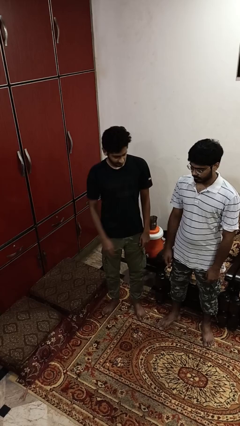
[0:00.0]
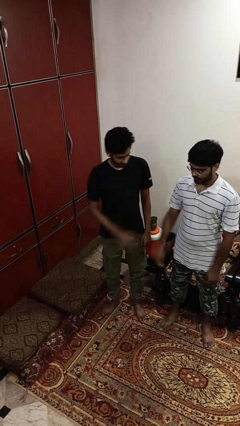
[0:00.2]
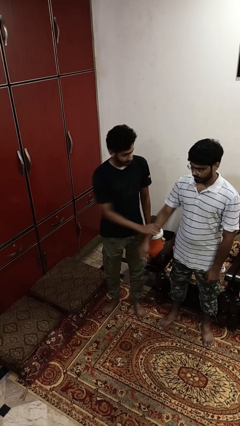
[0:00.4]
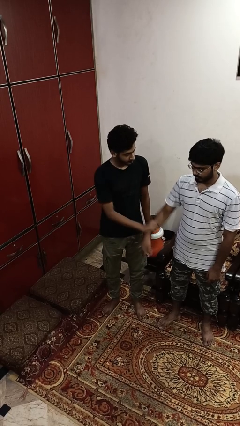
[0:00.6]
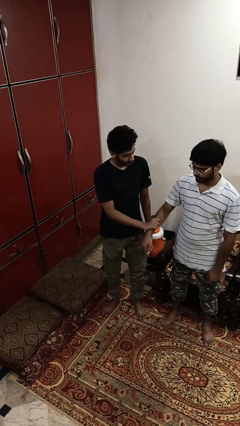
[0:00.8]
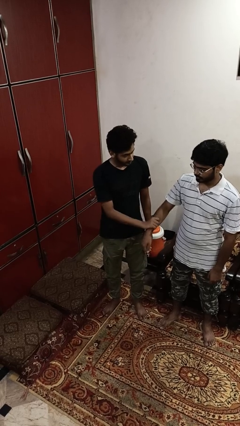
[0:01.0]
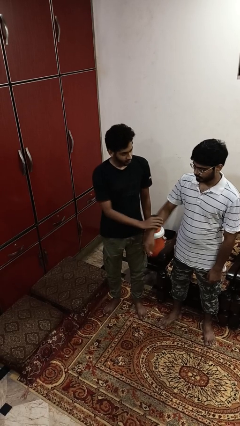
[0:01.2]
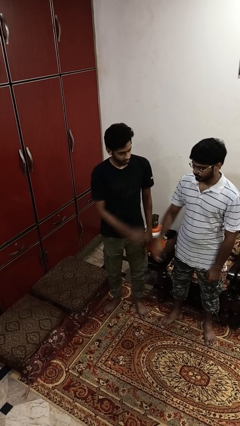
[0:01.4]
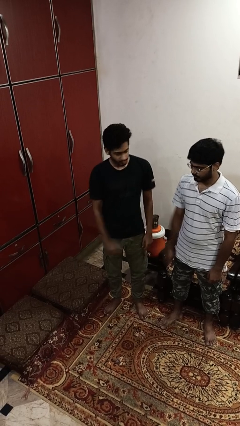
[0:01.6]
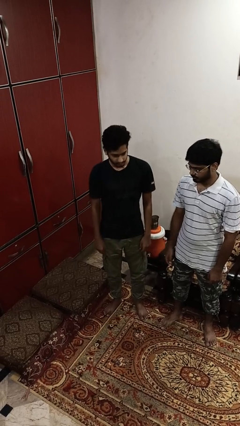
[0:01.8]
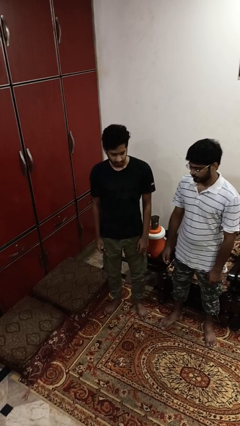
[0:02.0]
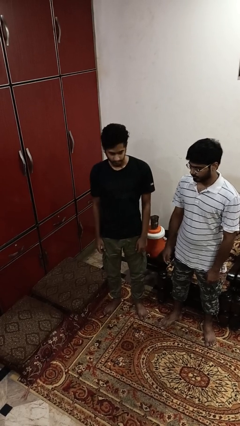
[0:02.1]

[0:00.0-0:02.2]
person grabs person by forearm

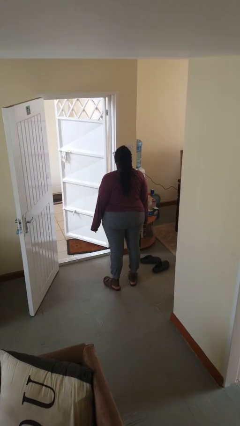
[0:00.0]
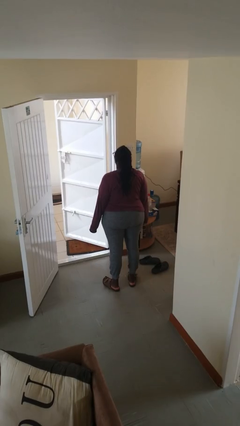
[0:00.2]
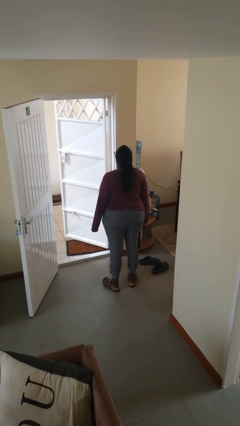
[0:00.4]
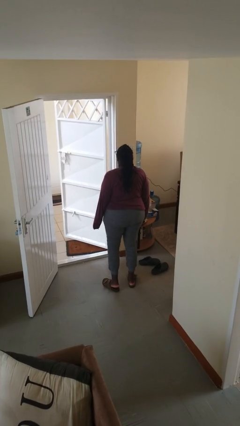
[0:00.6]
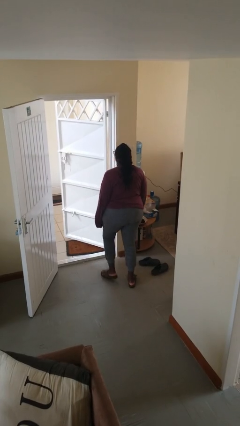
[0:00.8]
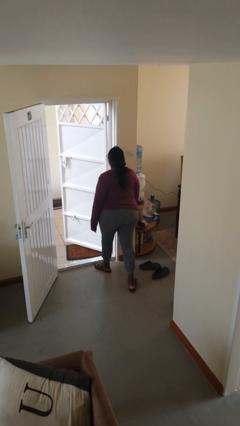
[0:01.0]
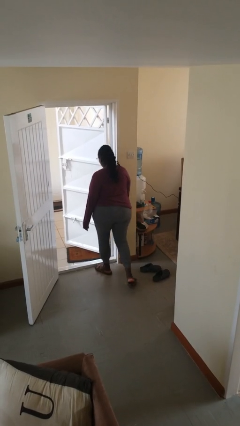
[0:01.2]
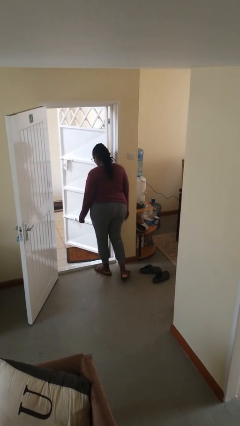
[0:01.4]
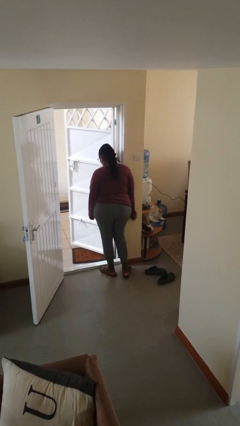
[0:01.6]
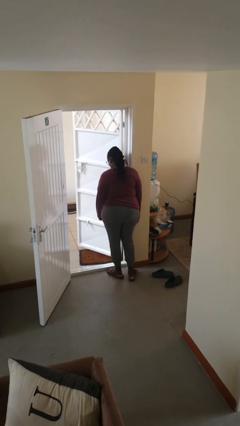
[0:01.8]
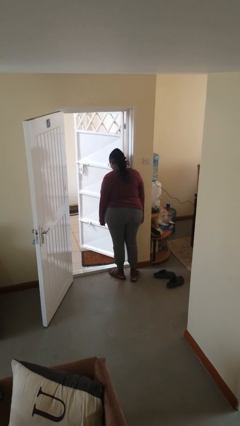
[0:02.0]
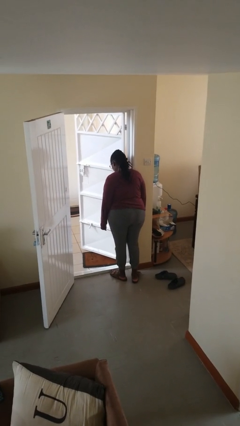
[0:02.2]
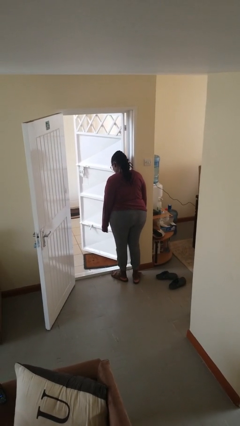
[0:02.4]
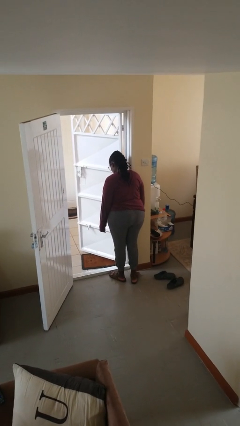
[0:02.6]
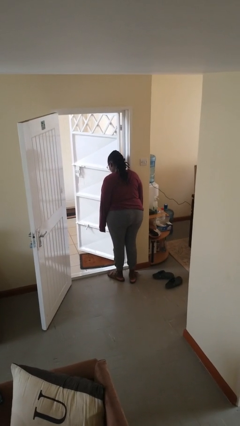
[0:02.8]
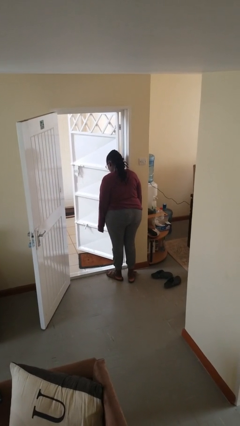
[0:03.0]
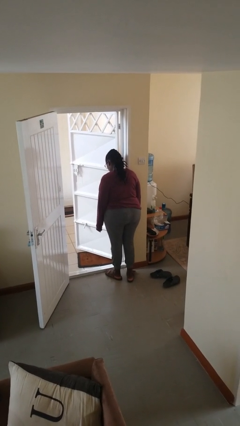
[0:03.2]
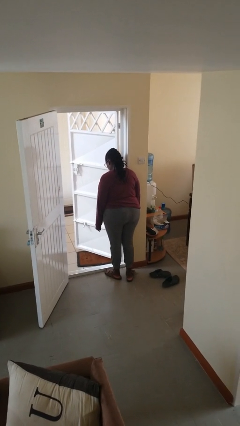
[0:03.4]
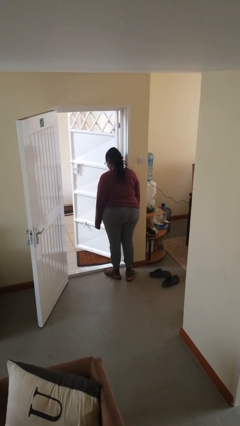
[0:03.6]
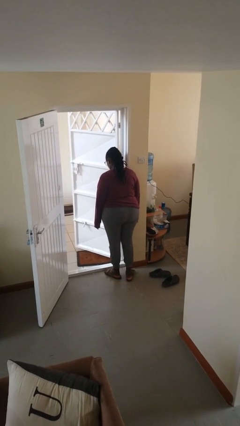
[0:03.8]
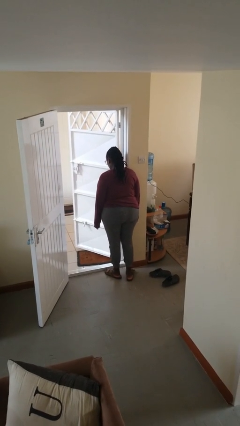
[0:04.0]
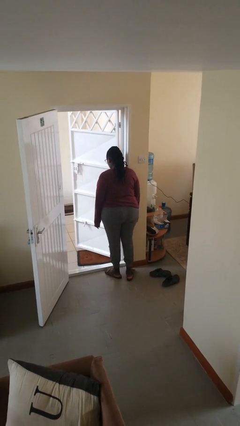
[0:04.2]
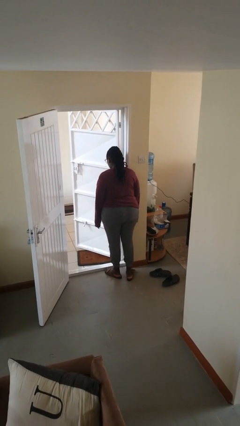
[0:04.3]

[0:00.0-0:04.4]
person bumps into wall

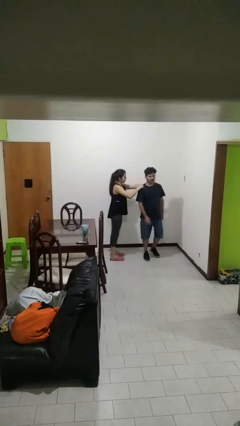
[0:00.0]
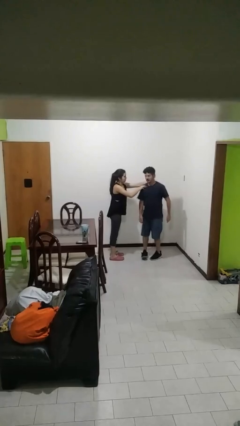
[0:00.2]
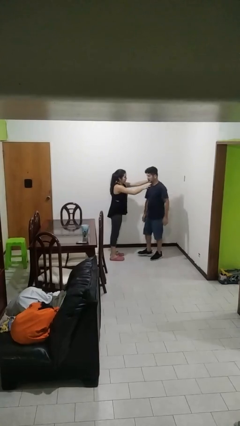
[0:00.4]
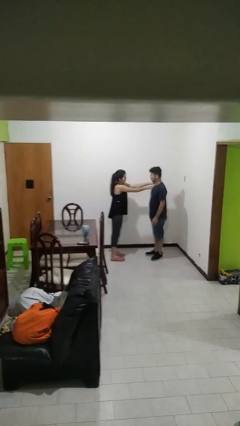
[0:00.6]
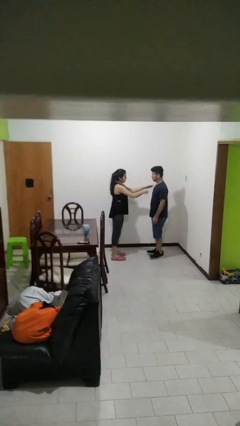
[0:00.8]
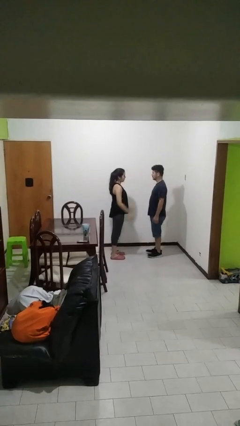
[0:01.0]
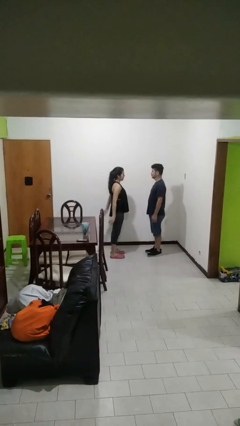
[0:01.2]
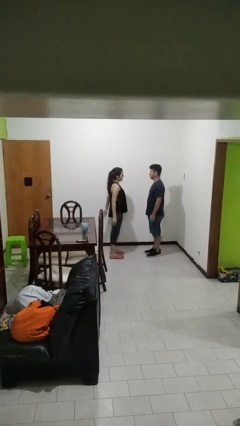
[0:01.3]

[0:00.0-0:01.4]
person spins person around

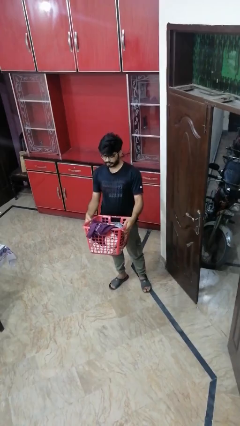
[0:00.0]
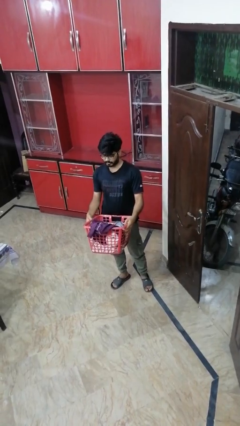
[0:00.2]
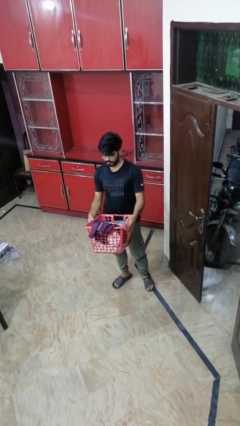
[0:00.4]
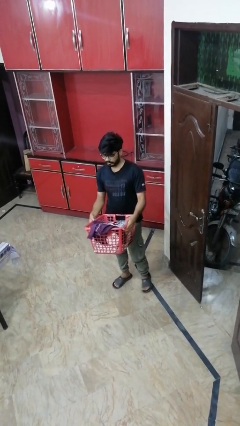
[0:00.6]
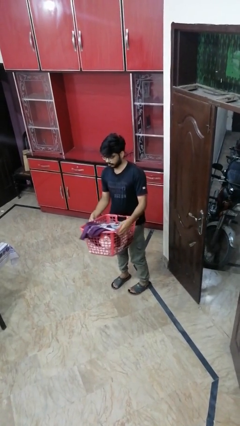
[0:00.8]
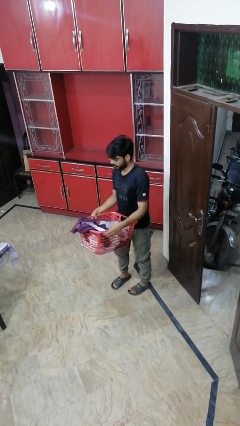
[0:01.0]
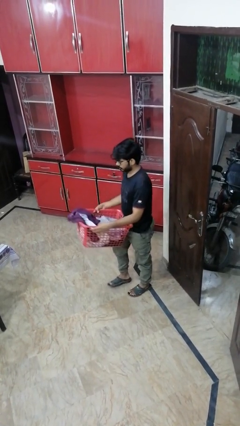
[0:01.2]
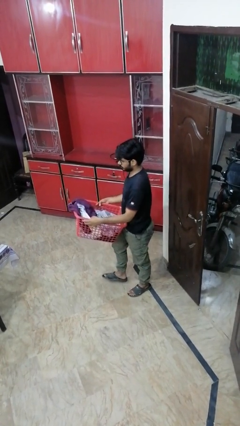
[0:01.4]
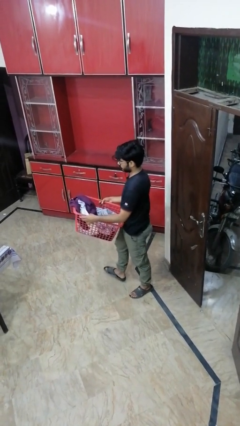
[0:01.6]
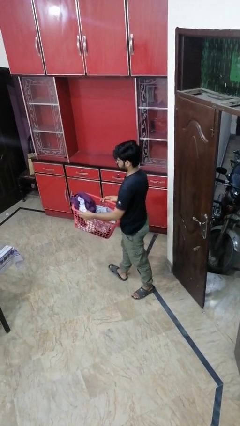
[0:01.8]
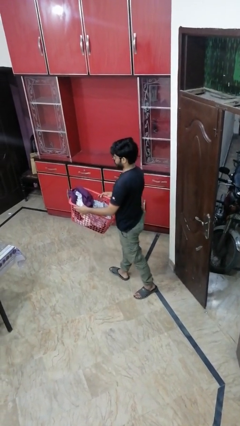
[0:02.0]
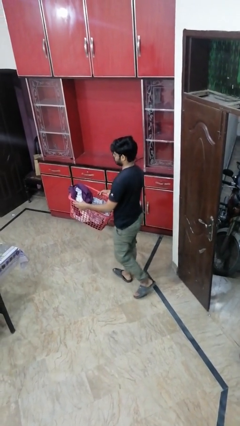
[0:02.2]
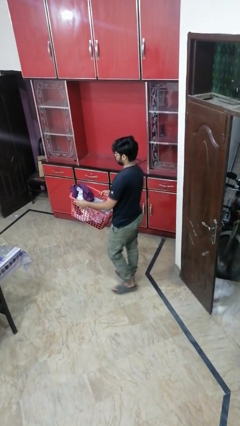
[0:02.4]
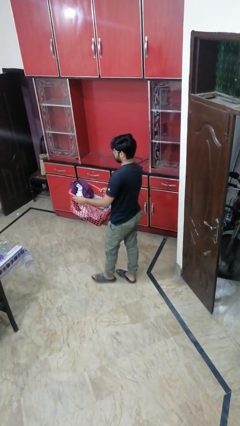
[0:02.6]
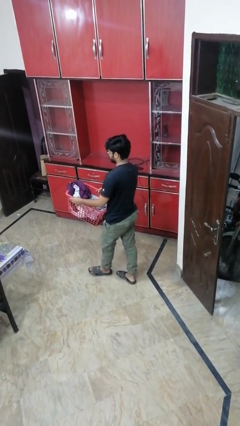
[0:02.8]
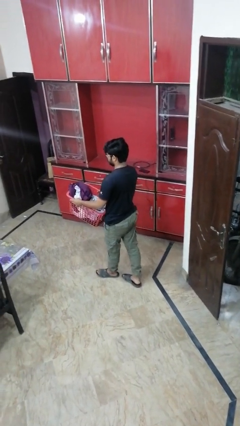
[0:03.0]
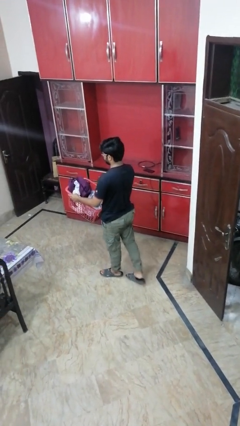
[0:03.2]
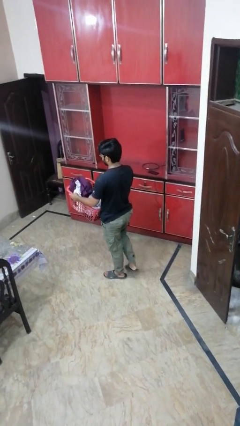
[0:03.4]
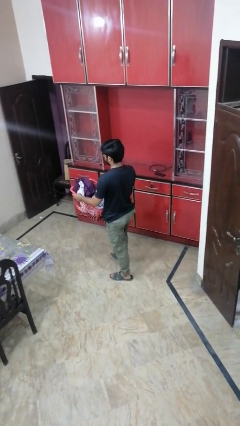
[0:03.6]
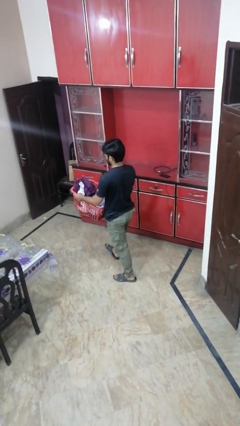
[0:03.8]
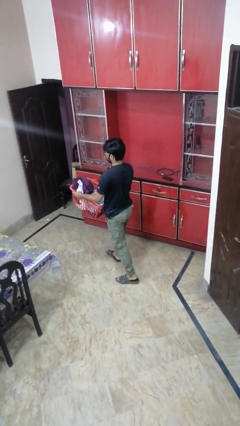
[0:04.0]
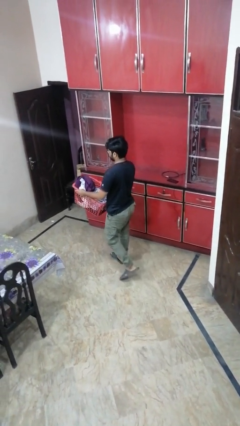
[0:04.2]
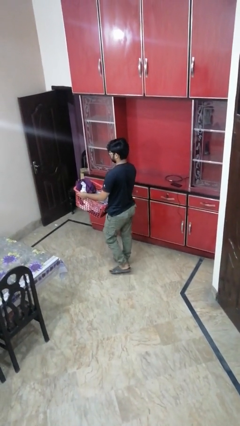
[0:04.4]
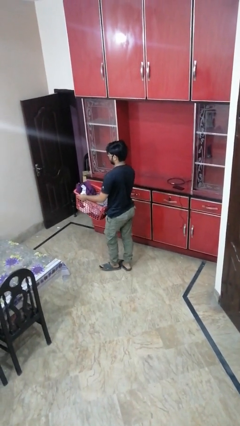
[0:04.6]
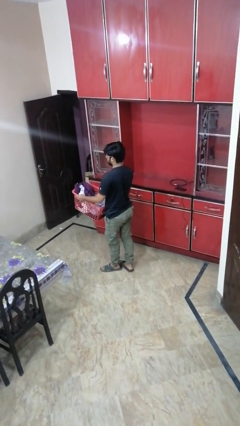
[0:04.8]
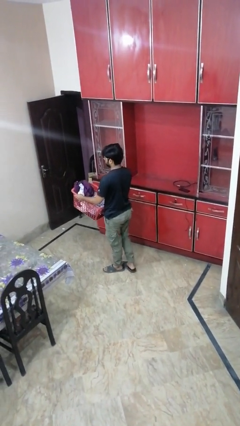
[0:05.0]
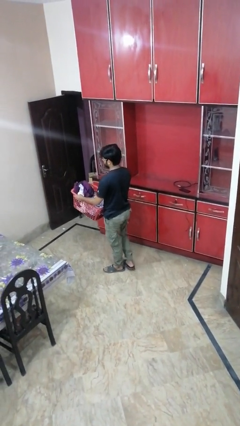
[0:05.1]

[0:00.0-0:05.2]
person carries laundry basket

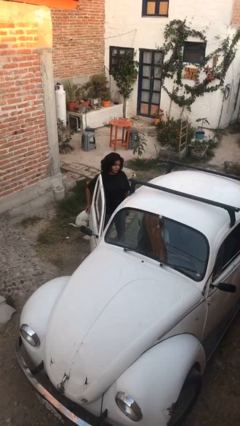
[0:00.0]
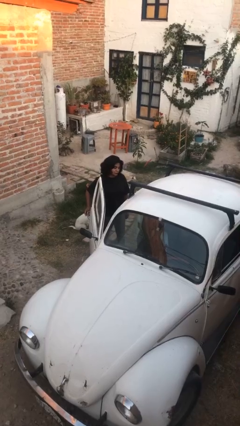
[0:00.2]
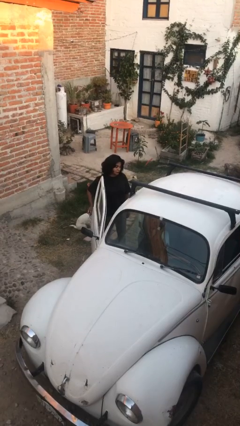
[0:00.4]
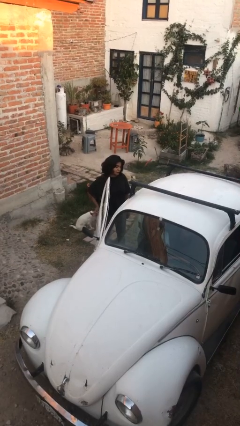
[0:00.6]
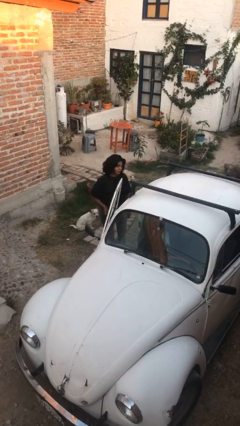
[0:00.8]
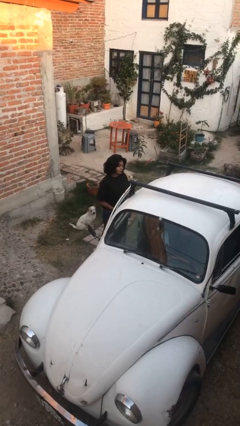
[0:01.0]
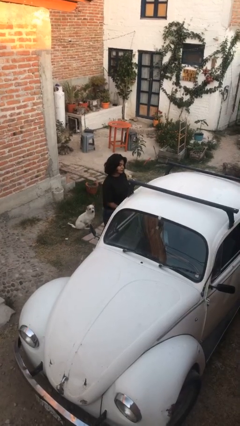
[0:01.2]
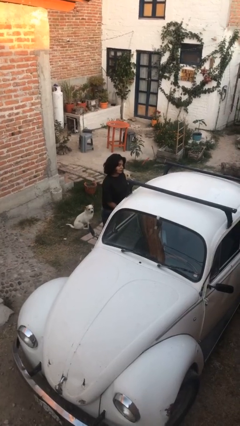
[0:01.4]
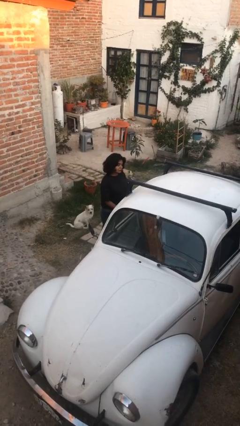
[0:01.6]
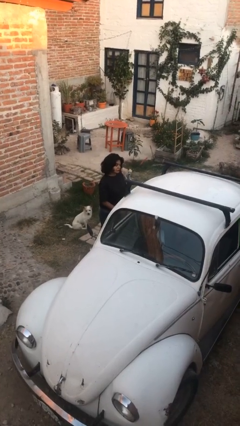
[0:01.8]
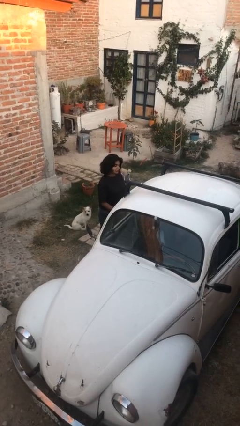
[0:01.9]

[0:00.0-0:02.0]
person closes car door

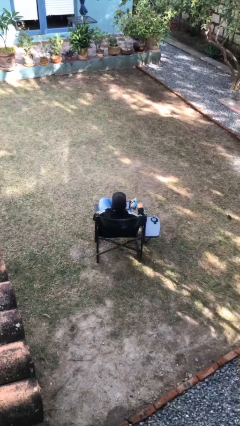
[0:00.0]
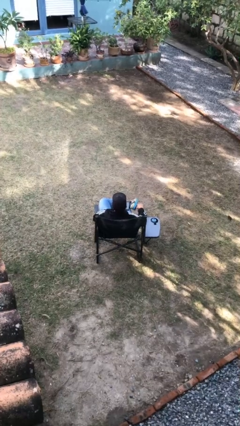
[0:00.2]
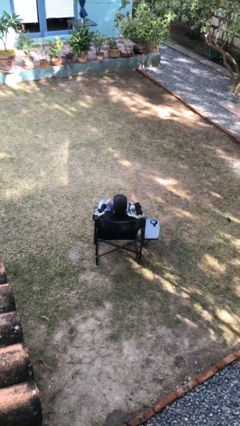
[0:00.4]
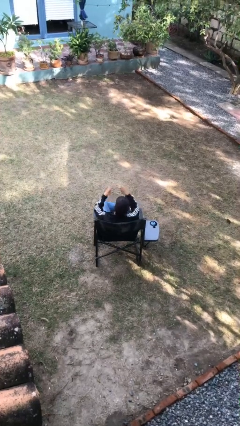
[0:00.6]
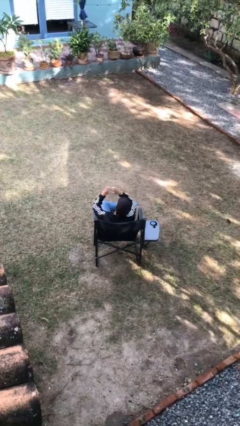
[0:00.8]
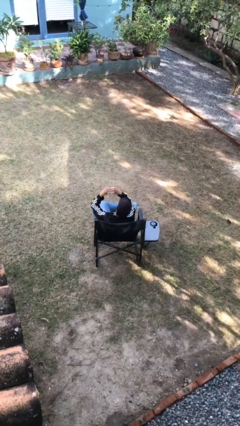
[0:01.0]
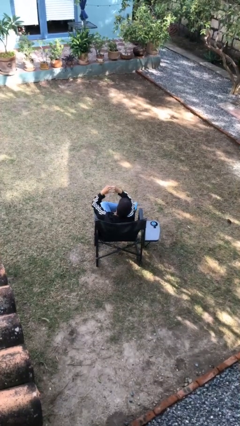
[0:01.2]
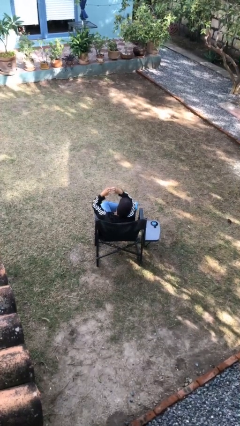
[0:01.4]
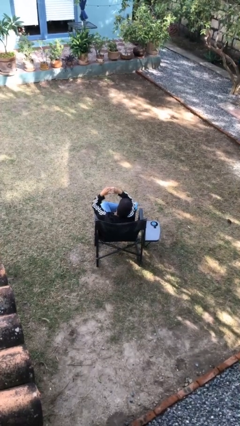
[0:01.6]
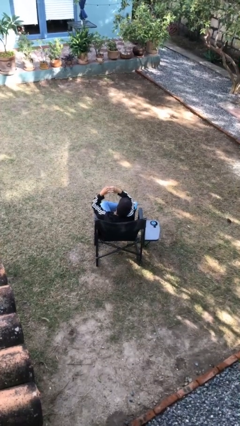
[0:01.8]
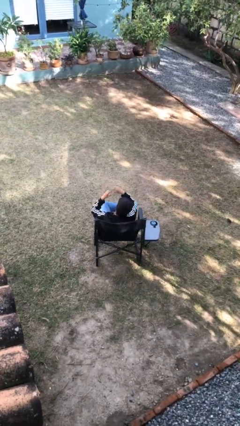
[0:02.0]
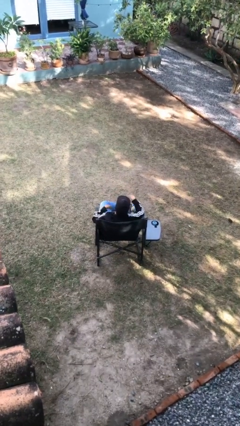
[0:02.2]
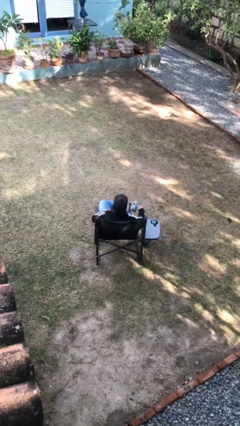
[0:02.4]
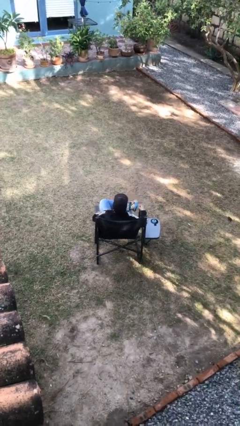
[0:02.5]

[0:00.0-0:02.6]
person gestures heart
